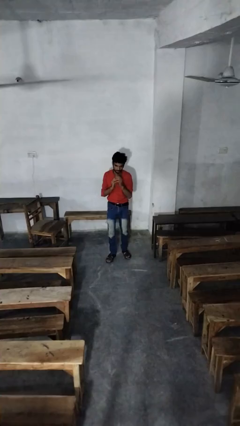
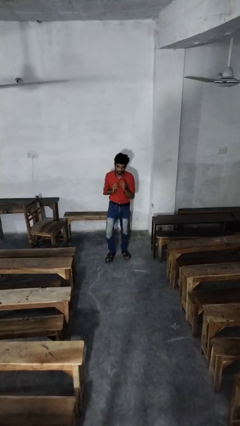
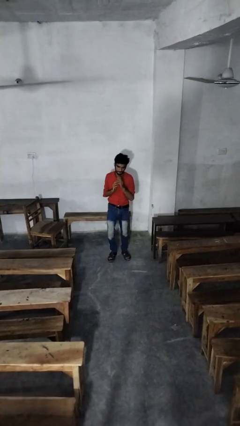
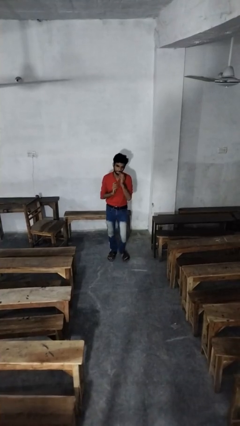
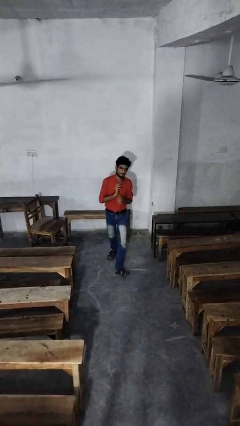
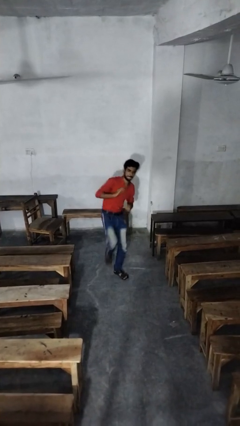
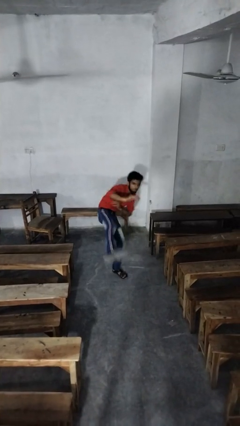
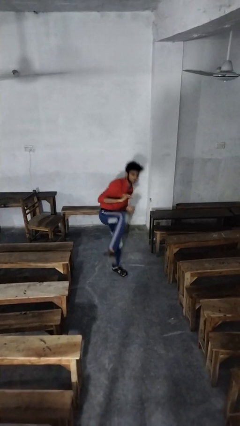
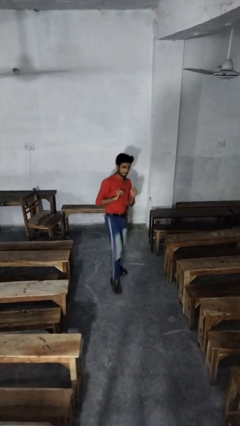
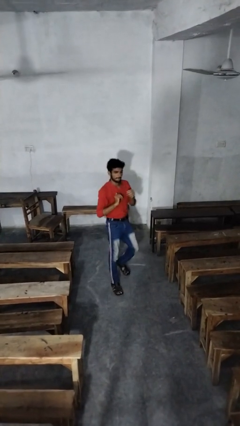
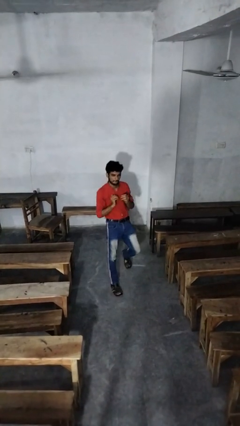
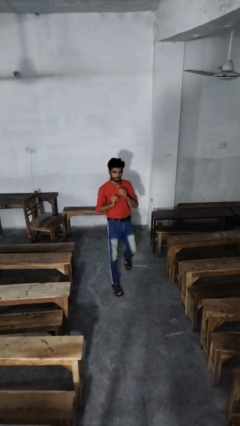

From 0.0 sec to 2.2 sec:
person karate kicks

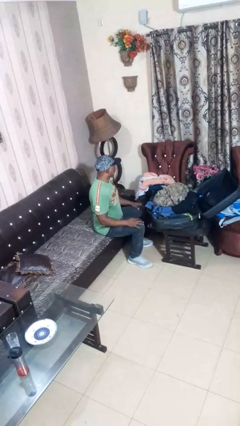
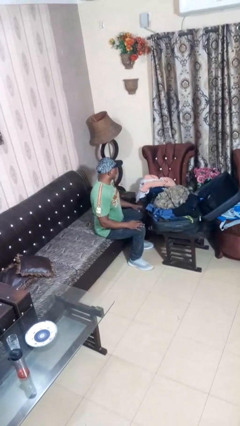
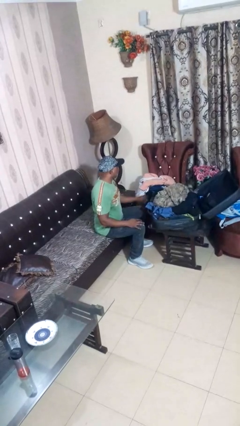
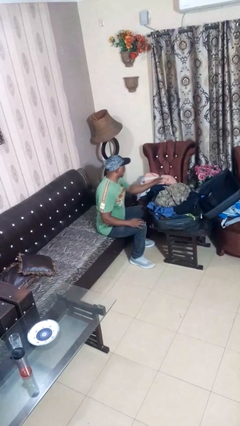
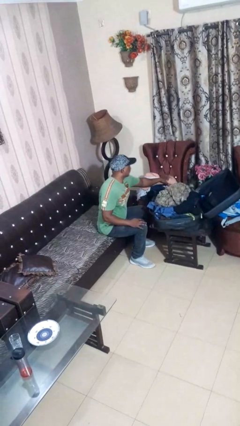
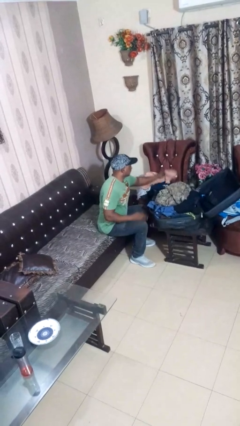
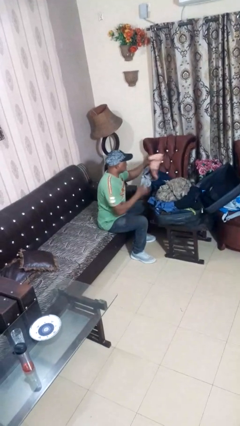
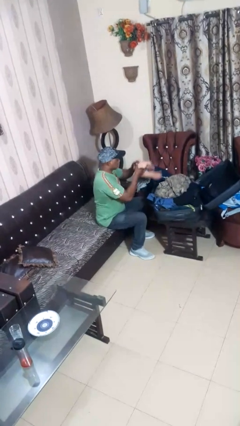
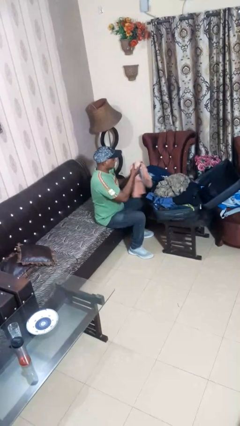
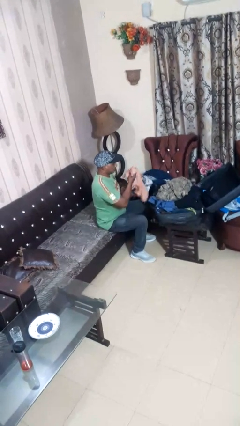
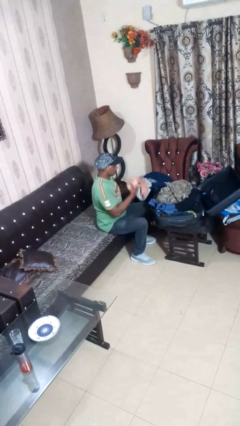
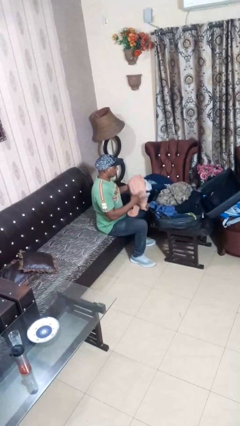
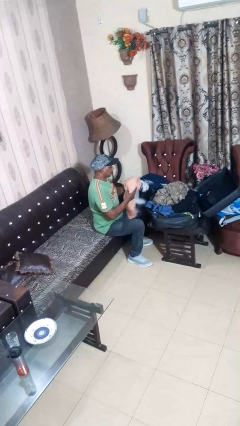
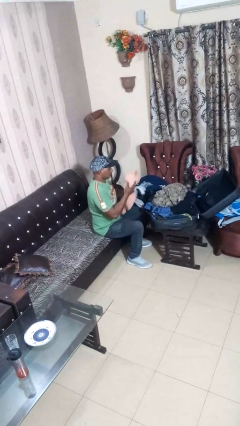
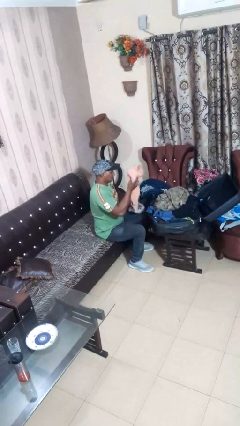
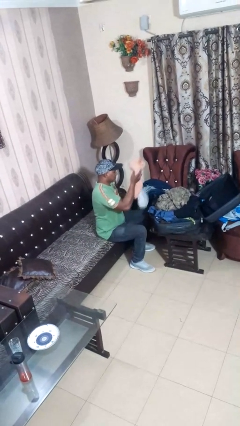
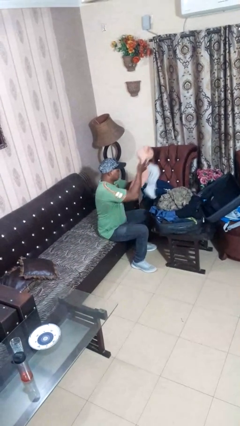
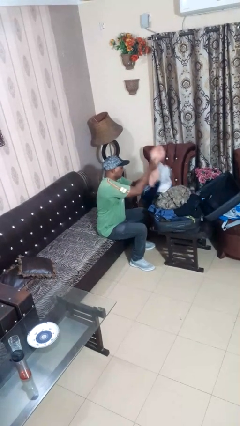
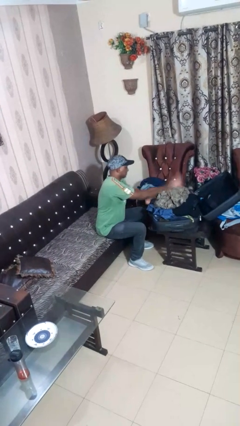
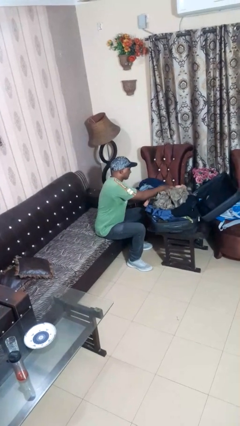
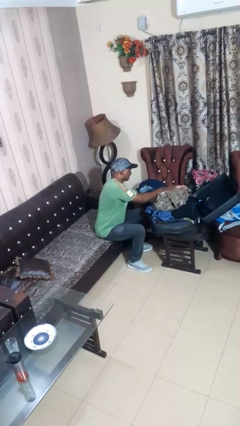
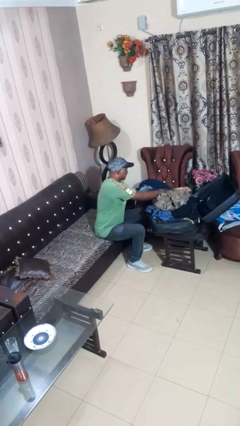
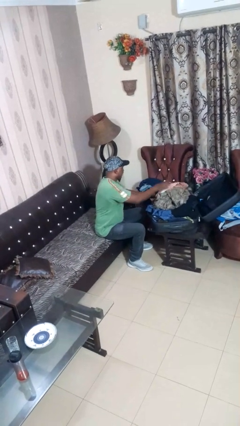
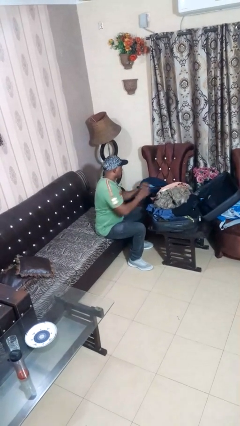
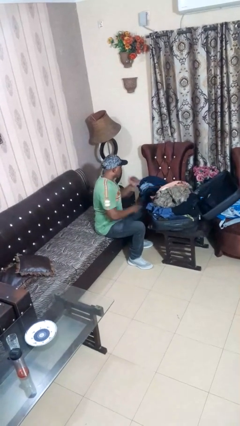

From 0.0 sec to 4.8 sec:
person loads clothes into suitcase

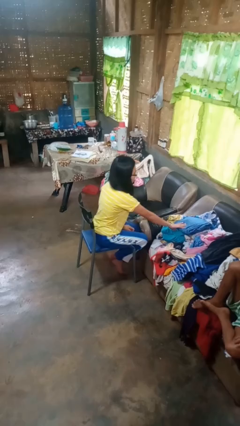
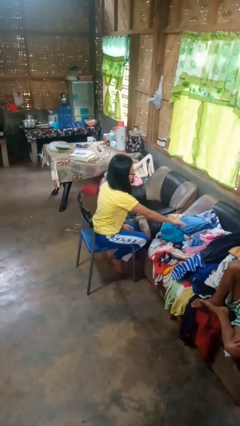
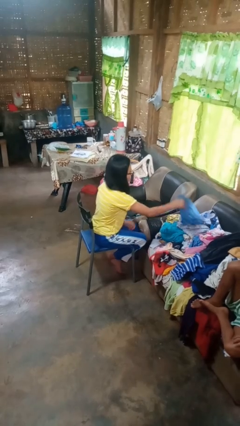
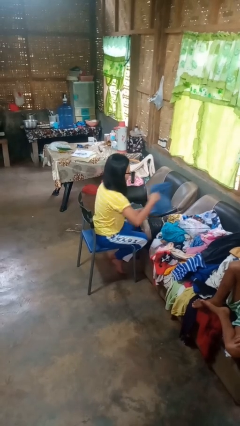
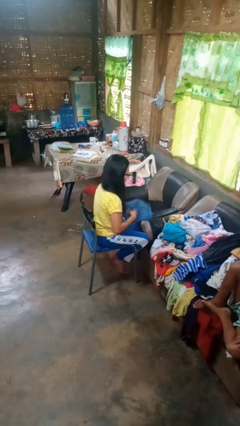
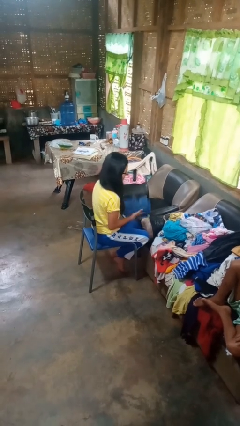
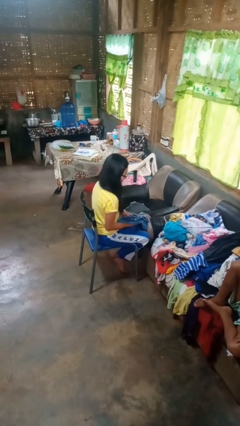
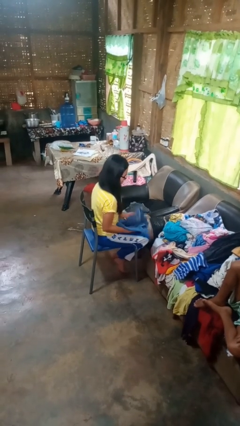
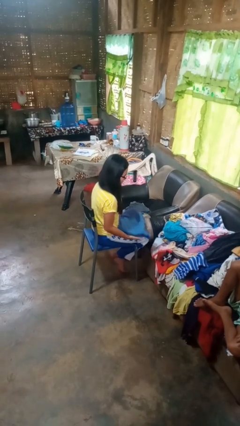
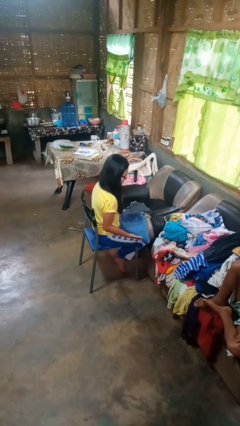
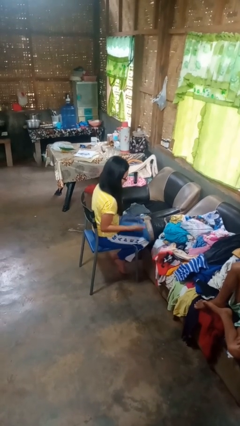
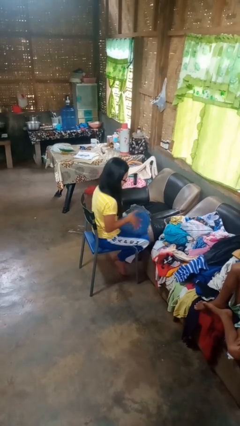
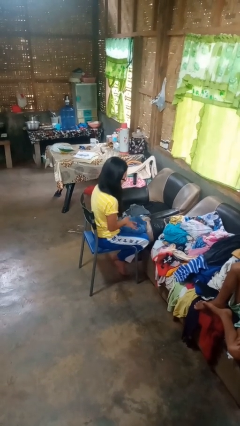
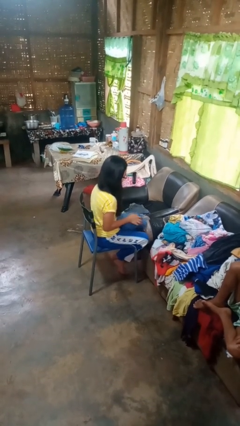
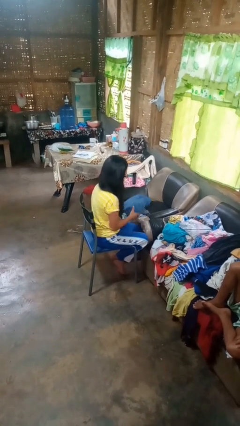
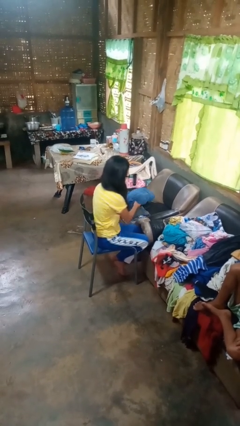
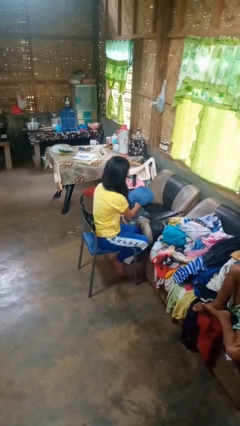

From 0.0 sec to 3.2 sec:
person folds pants

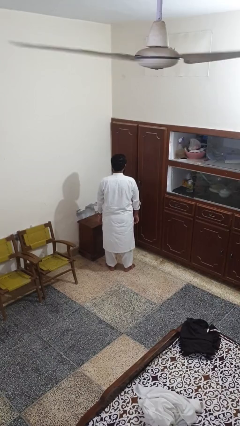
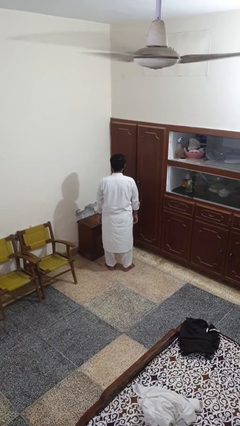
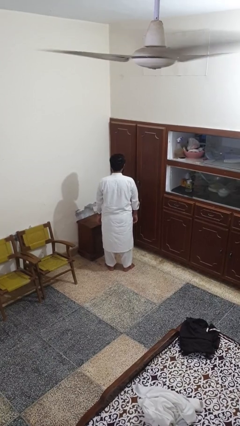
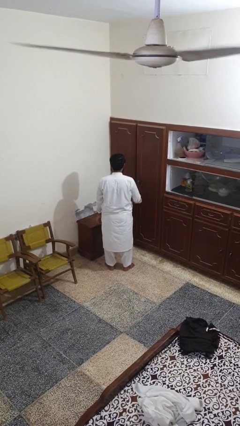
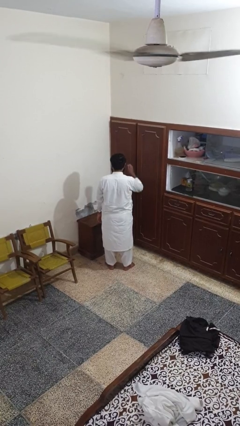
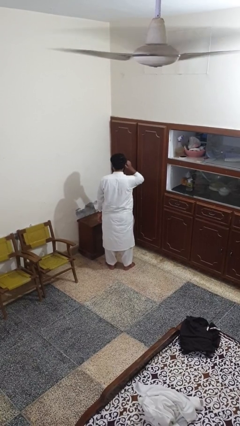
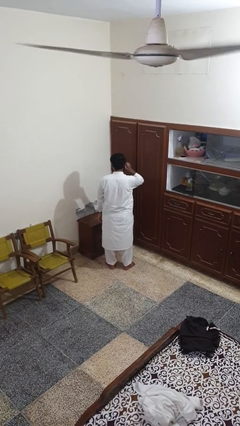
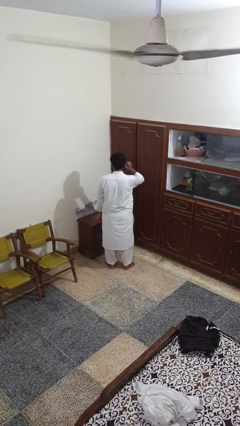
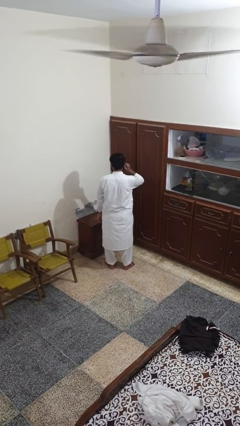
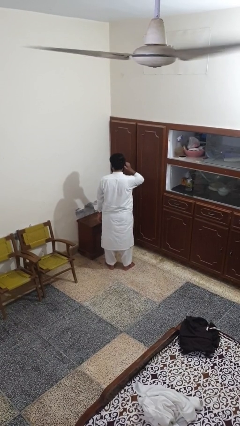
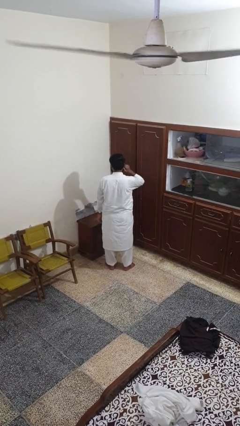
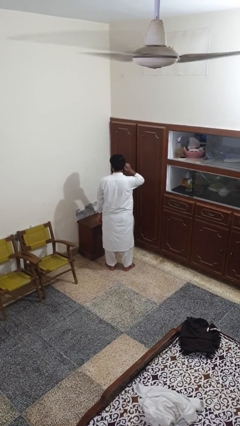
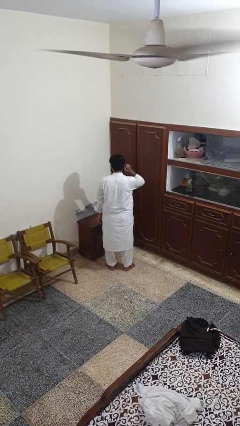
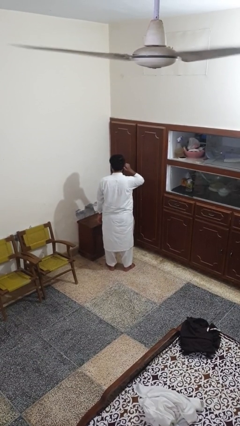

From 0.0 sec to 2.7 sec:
person touches earlobe

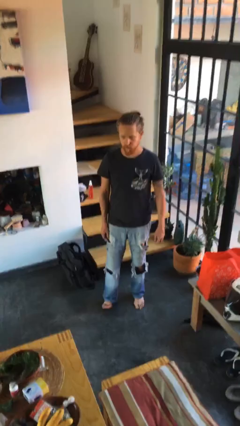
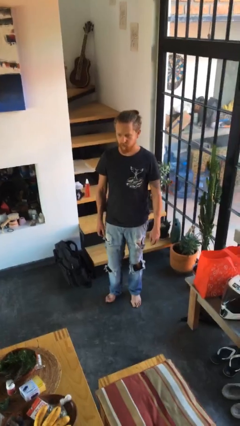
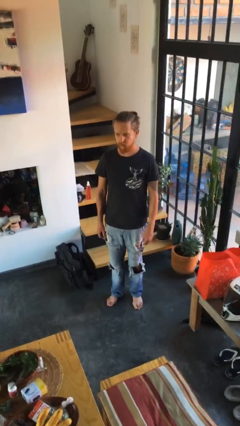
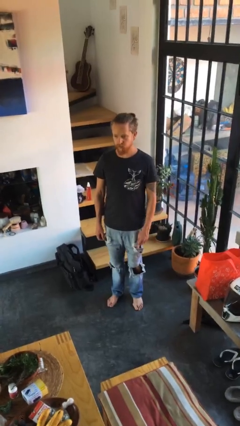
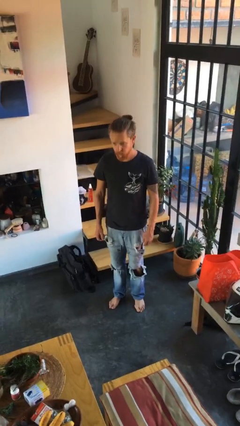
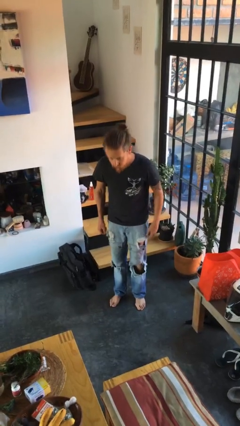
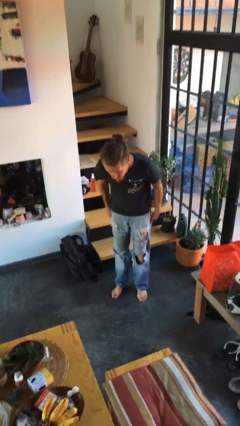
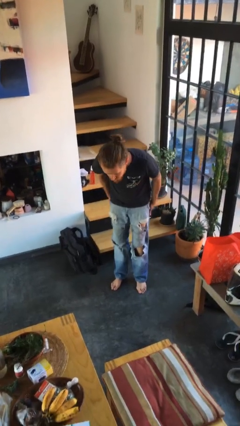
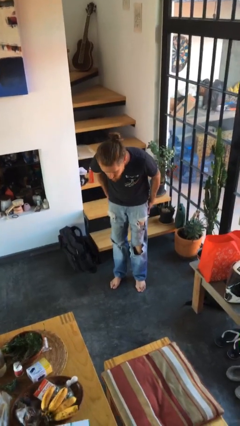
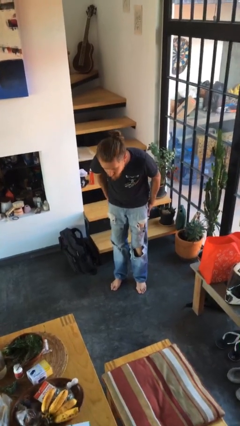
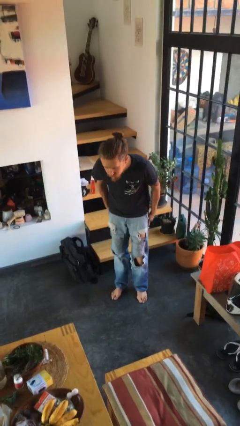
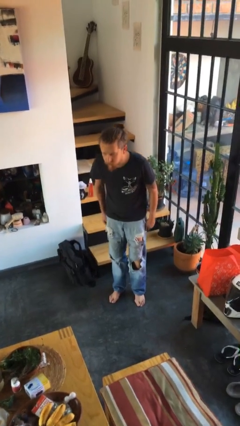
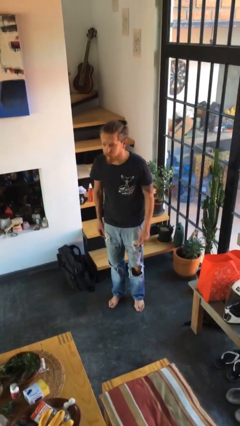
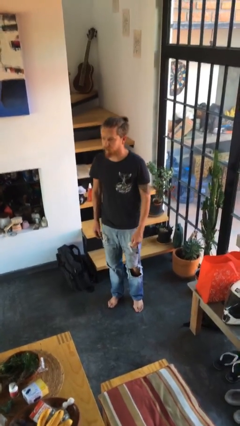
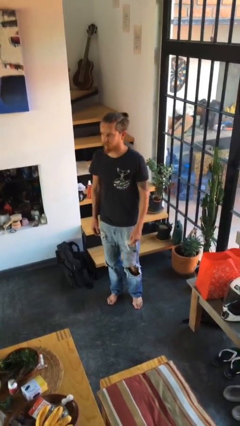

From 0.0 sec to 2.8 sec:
person bows

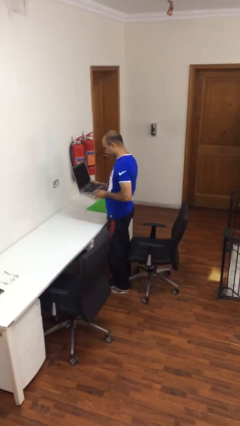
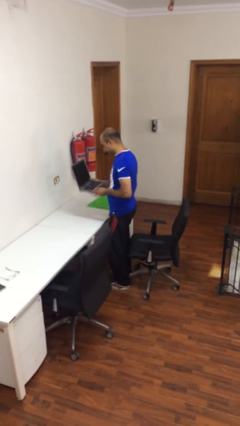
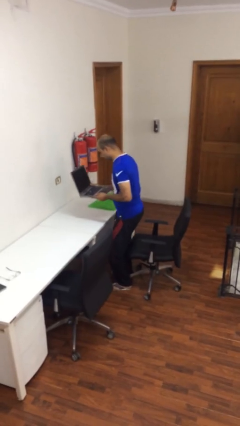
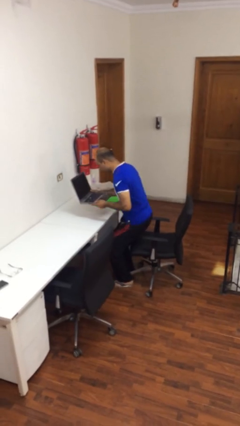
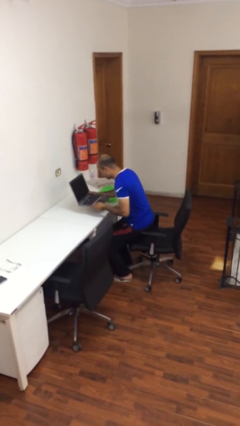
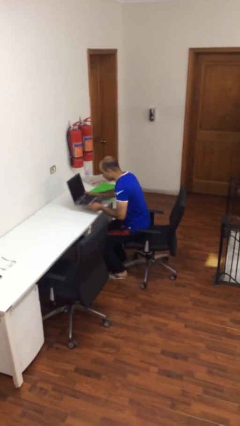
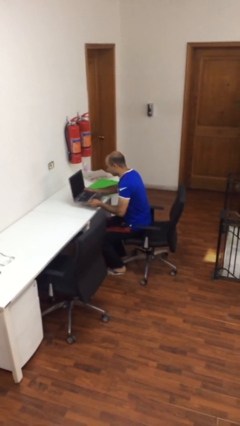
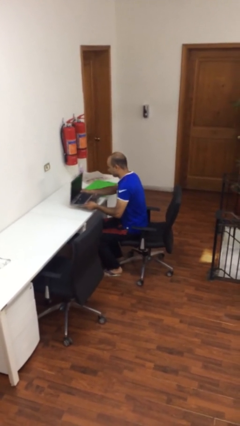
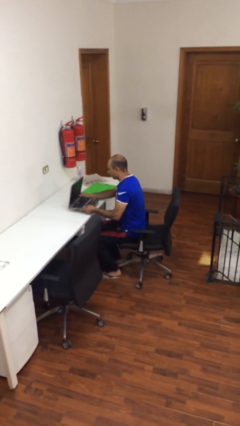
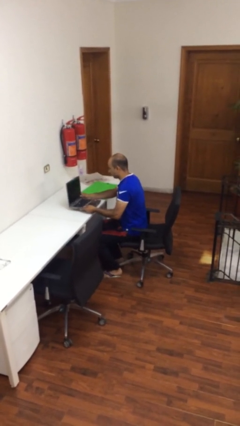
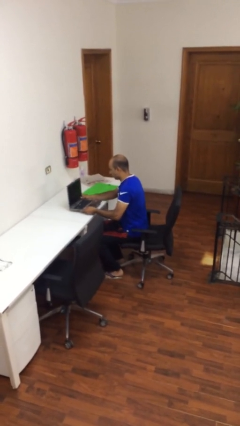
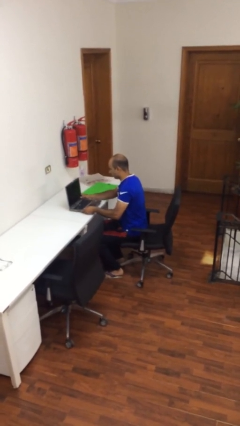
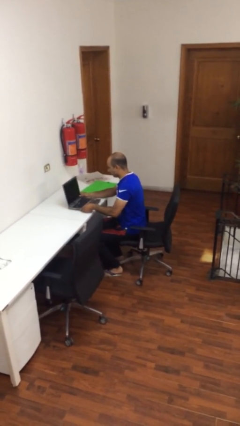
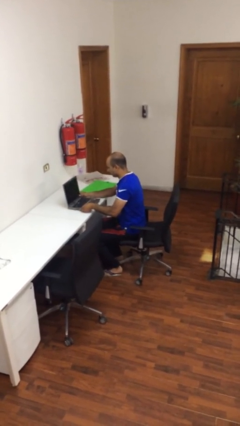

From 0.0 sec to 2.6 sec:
person sits down
